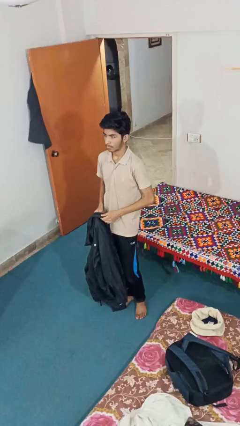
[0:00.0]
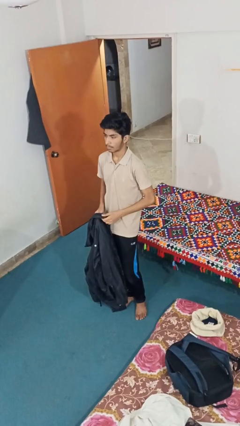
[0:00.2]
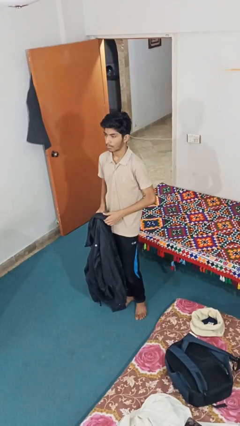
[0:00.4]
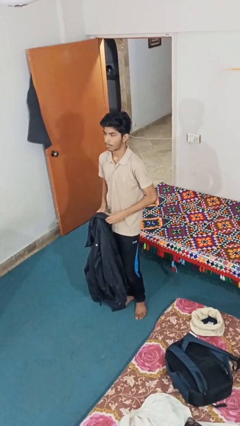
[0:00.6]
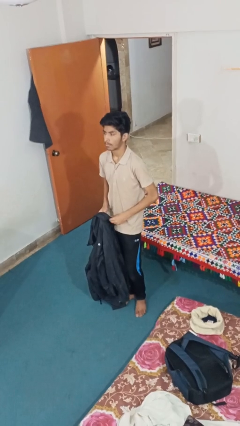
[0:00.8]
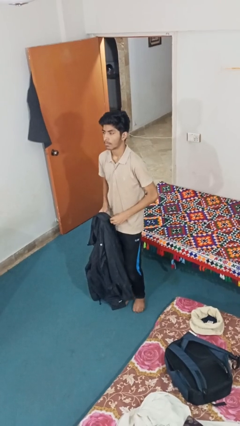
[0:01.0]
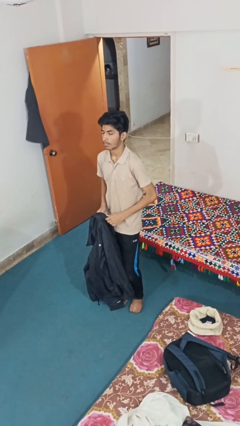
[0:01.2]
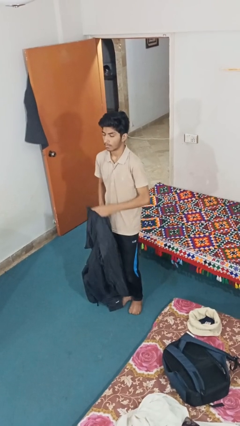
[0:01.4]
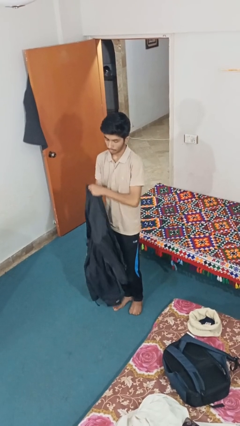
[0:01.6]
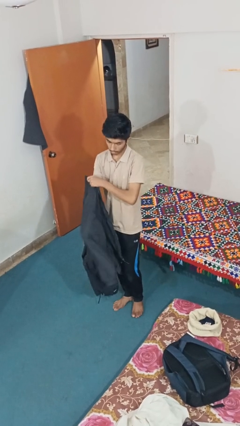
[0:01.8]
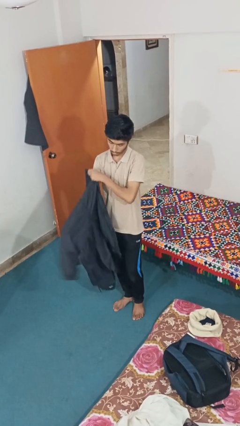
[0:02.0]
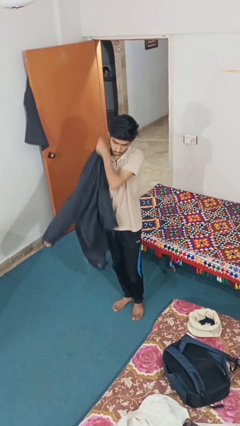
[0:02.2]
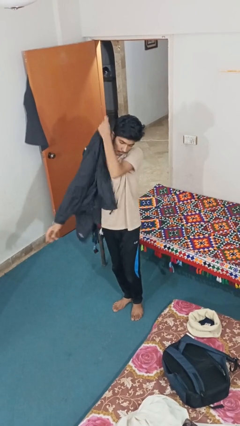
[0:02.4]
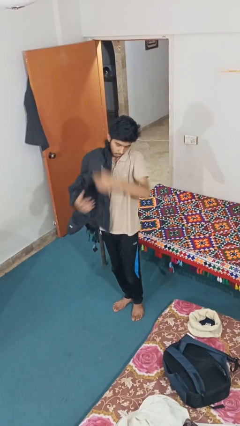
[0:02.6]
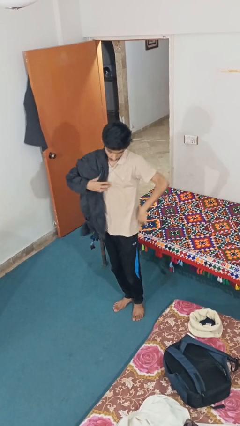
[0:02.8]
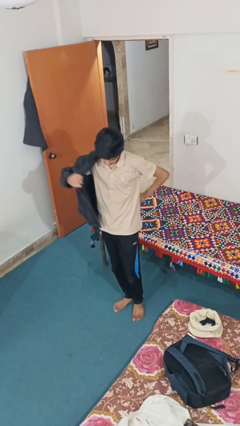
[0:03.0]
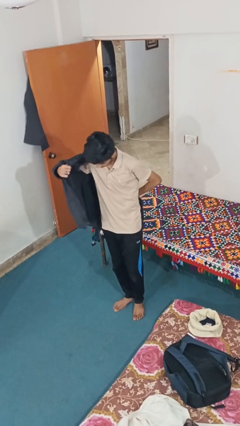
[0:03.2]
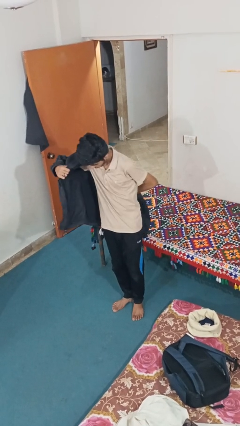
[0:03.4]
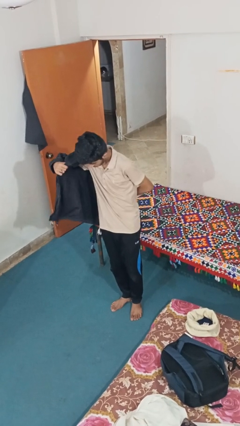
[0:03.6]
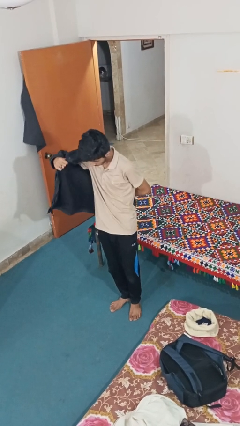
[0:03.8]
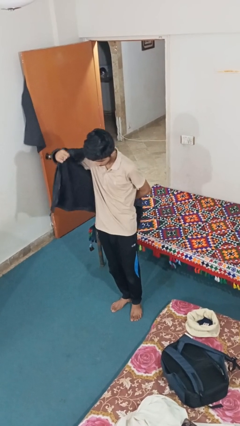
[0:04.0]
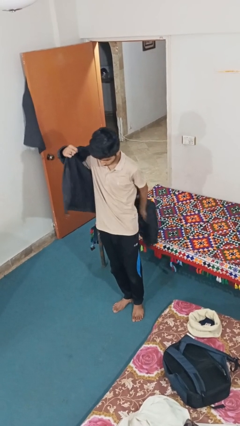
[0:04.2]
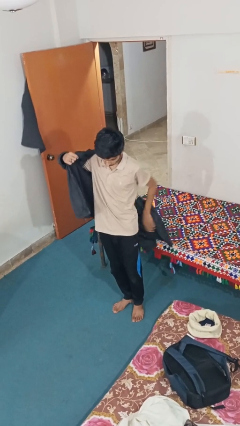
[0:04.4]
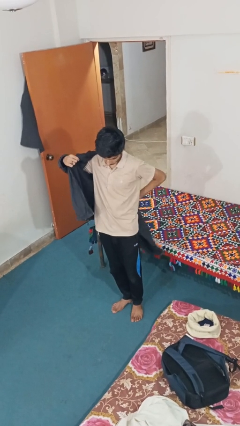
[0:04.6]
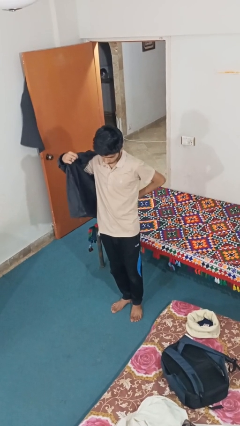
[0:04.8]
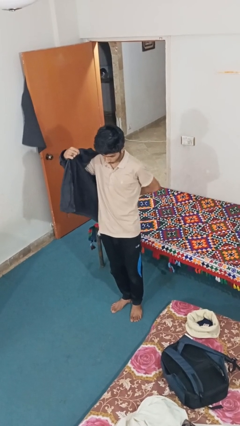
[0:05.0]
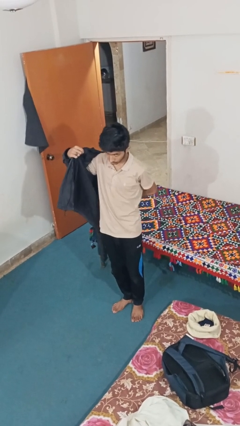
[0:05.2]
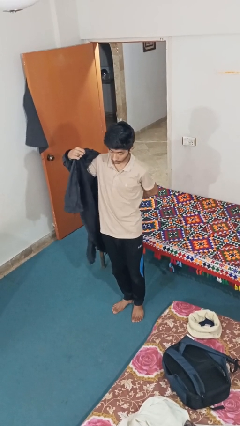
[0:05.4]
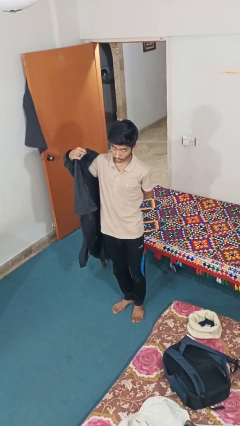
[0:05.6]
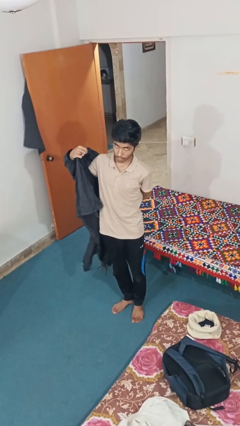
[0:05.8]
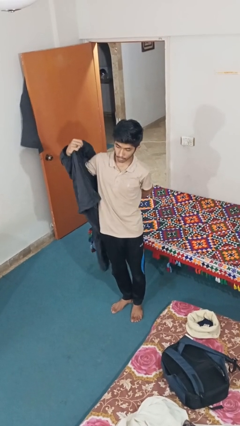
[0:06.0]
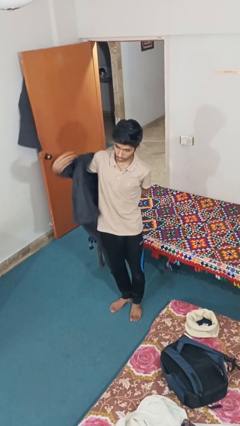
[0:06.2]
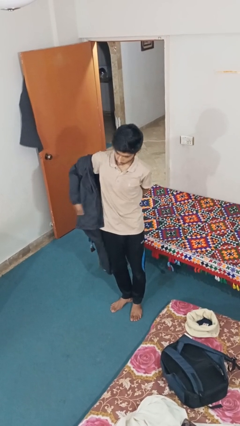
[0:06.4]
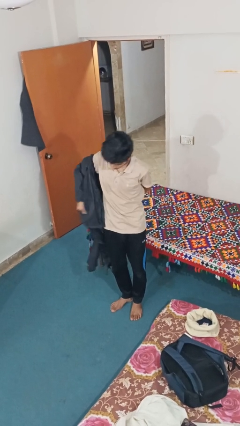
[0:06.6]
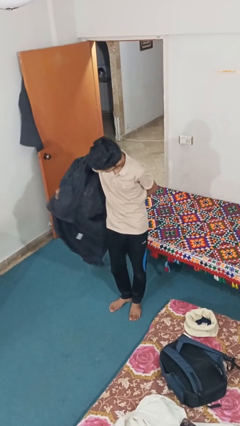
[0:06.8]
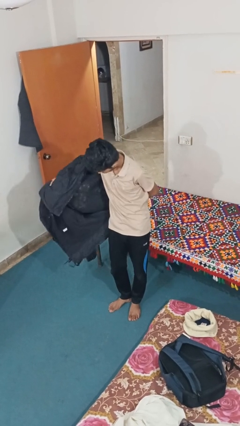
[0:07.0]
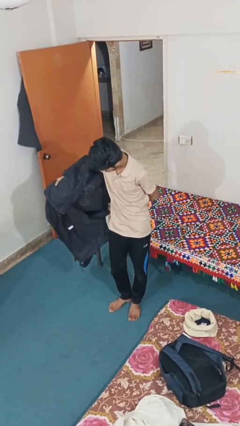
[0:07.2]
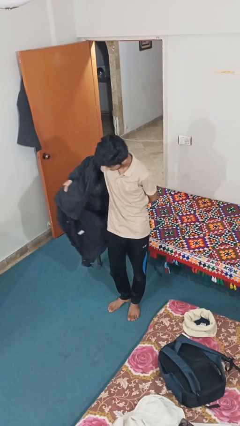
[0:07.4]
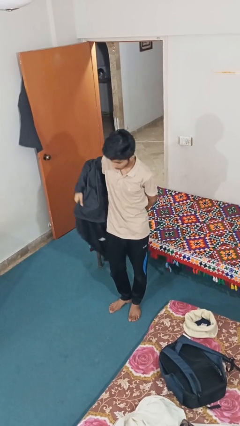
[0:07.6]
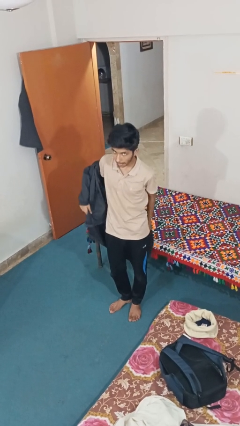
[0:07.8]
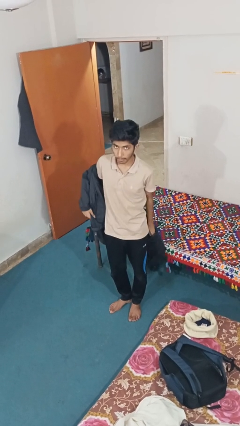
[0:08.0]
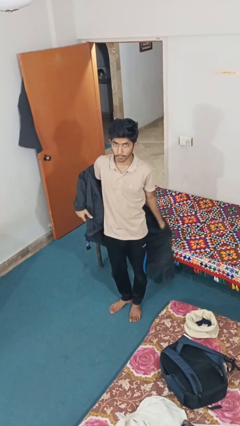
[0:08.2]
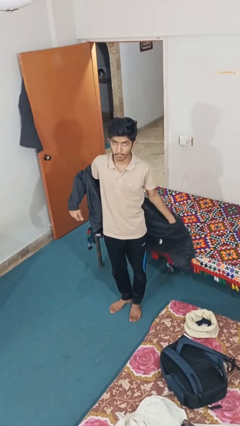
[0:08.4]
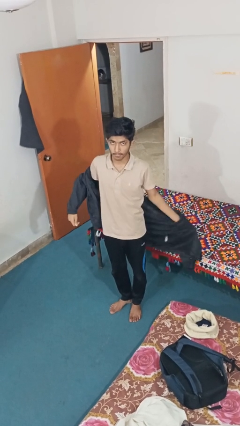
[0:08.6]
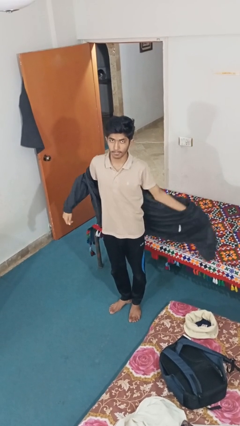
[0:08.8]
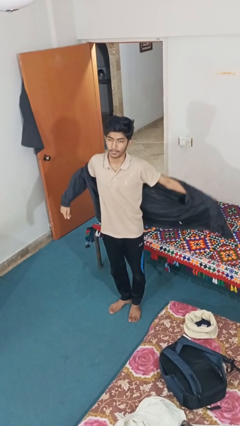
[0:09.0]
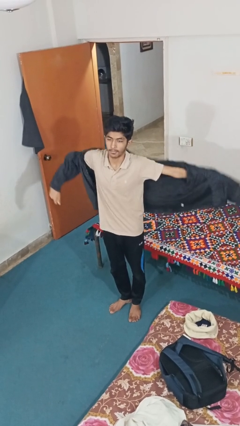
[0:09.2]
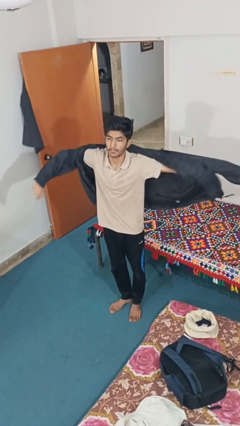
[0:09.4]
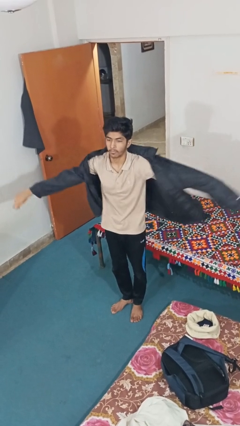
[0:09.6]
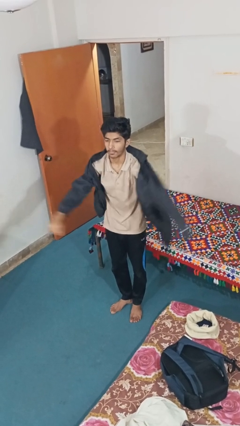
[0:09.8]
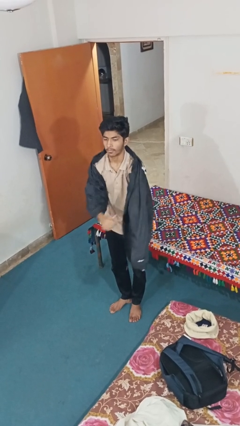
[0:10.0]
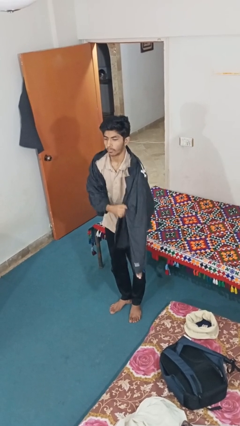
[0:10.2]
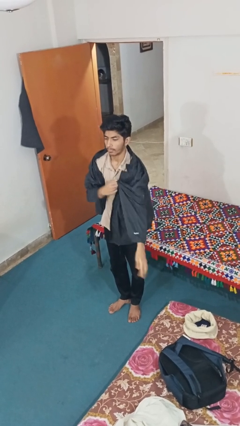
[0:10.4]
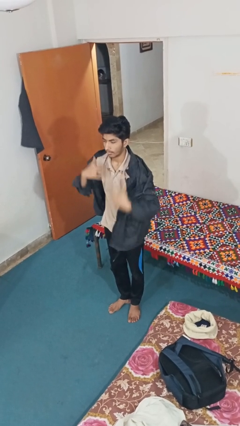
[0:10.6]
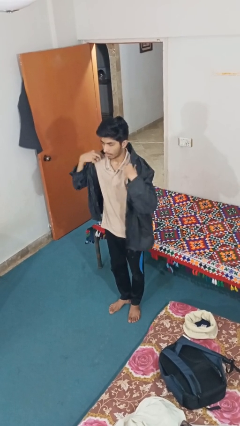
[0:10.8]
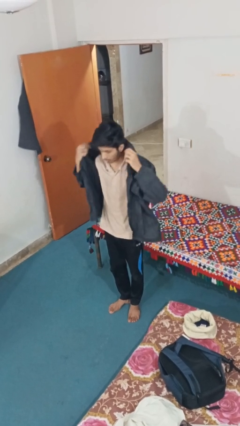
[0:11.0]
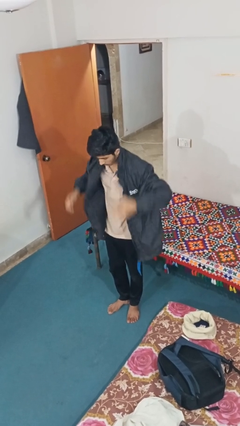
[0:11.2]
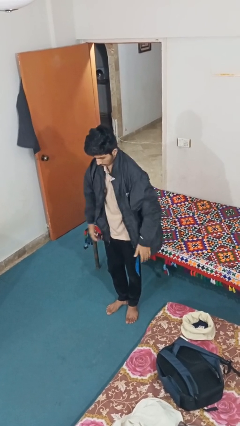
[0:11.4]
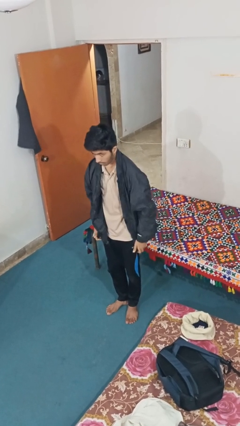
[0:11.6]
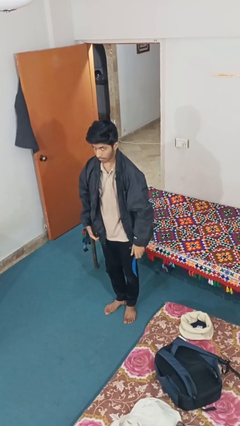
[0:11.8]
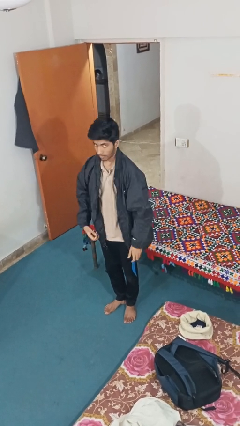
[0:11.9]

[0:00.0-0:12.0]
person puts on jacket

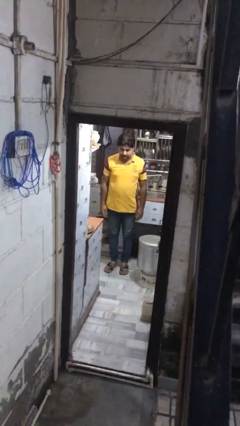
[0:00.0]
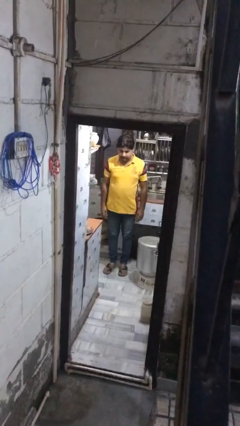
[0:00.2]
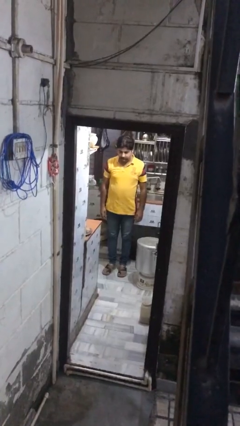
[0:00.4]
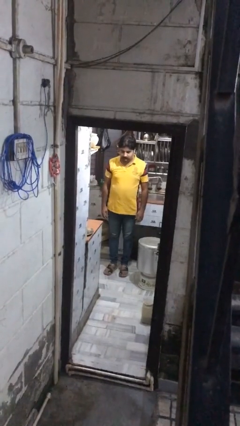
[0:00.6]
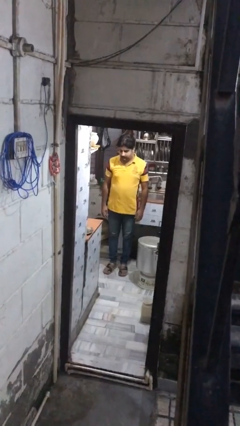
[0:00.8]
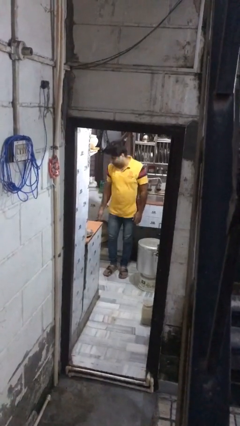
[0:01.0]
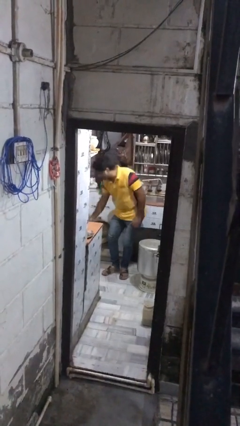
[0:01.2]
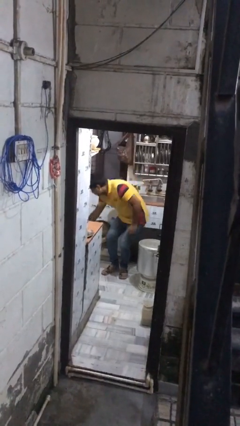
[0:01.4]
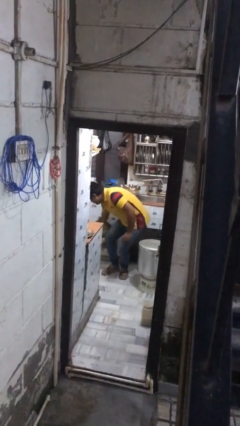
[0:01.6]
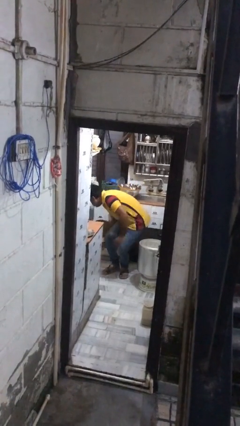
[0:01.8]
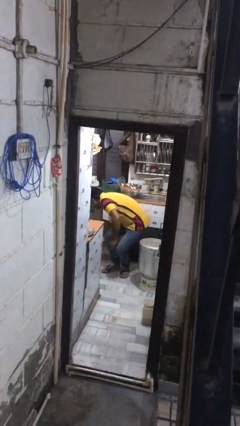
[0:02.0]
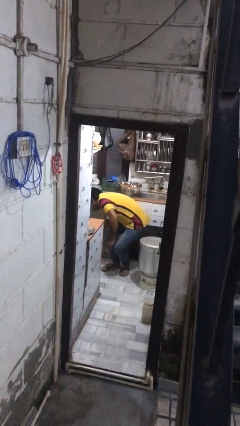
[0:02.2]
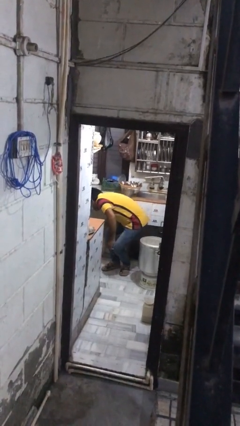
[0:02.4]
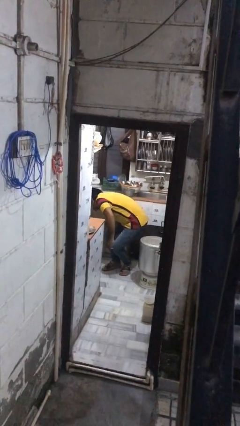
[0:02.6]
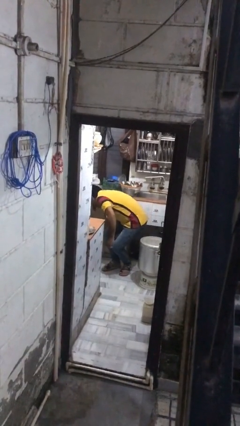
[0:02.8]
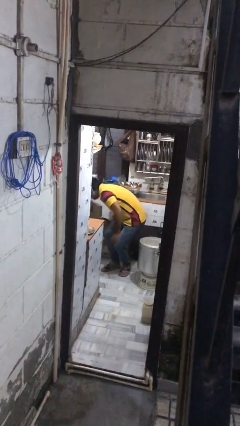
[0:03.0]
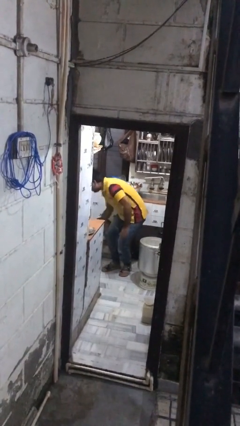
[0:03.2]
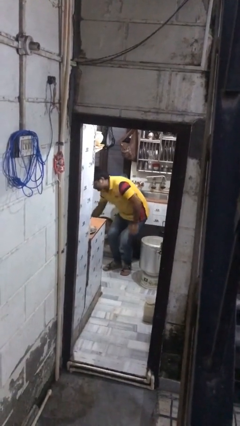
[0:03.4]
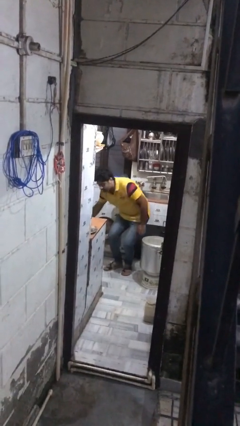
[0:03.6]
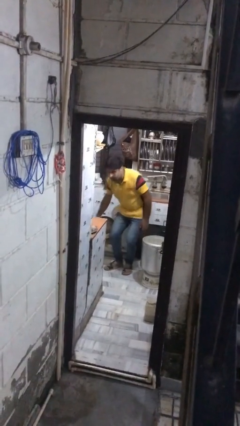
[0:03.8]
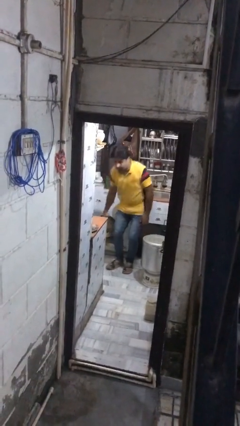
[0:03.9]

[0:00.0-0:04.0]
person searches in kitchen drawer

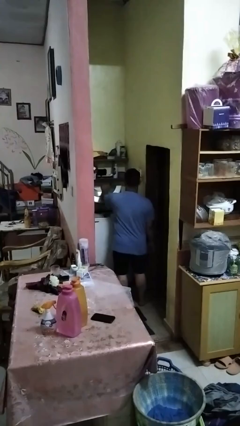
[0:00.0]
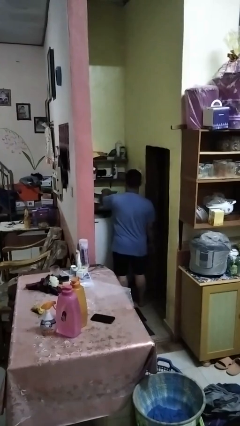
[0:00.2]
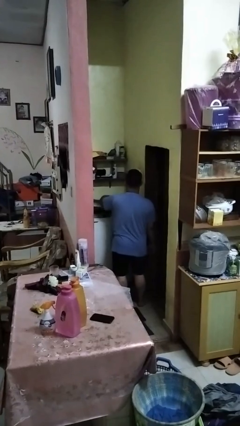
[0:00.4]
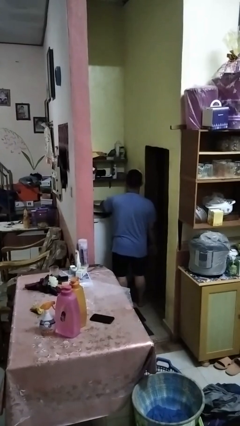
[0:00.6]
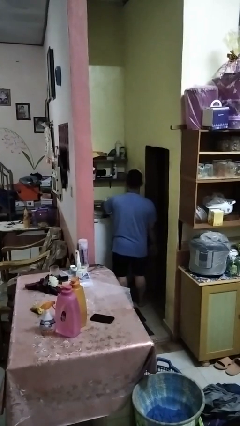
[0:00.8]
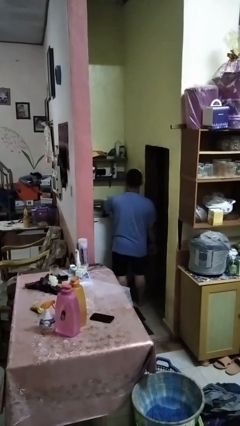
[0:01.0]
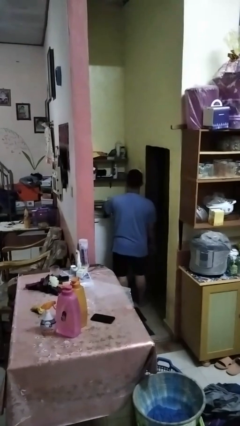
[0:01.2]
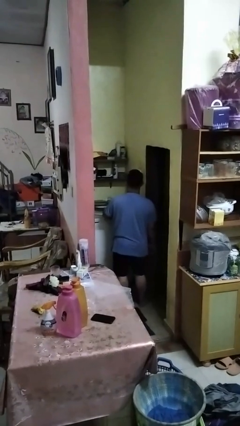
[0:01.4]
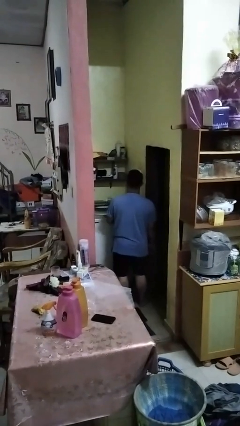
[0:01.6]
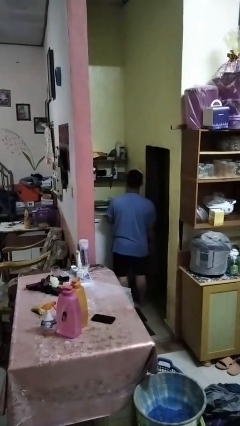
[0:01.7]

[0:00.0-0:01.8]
person closes clothes washer
